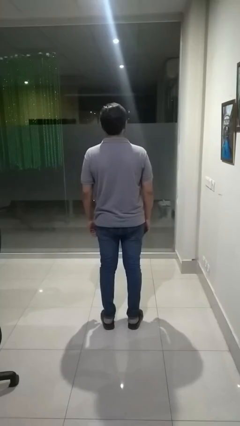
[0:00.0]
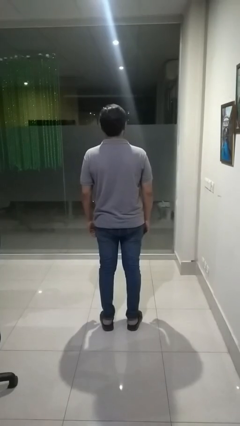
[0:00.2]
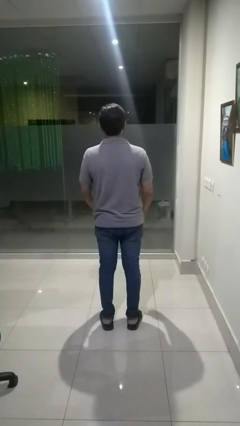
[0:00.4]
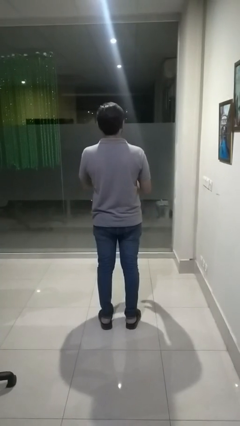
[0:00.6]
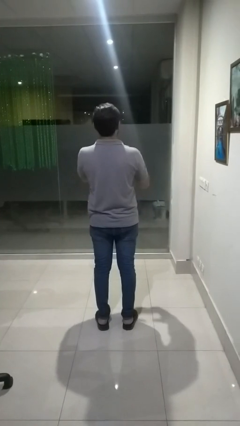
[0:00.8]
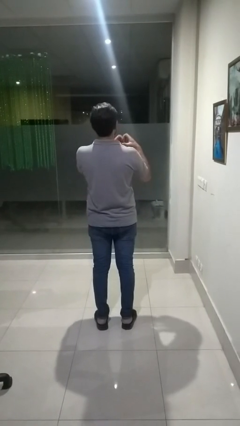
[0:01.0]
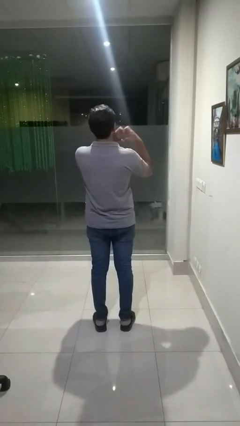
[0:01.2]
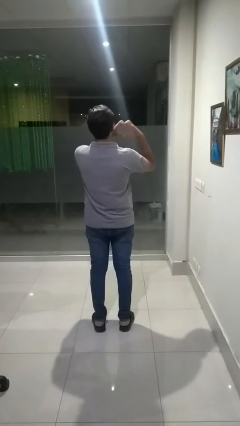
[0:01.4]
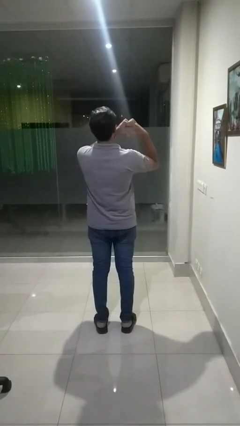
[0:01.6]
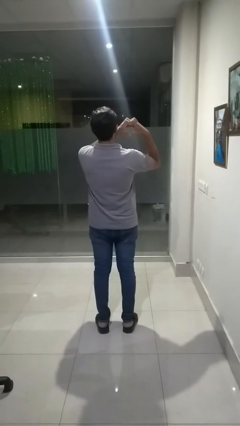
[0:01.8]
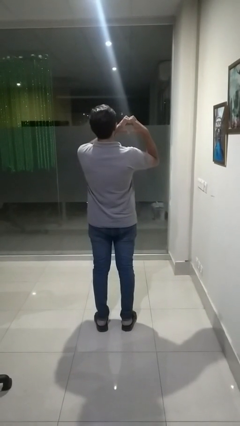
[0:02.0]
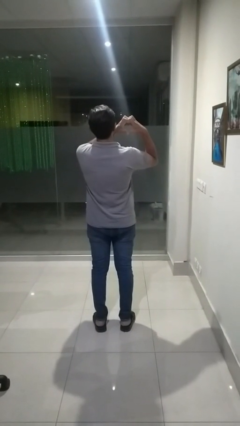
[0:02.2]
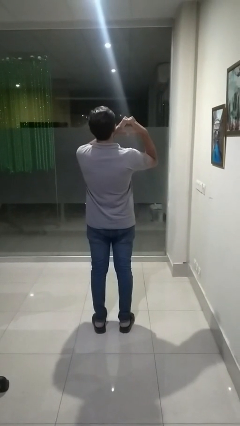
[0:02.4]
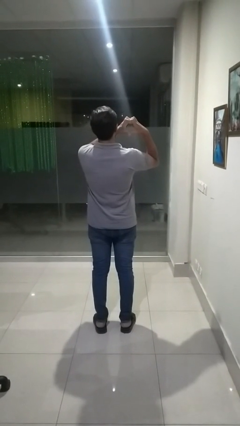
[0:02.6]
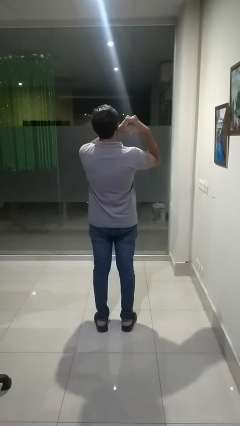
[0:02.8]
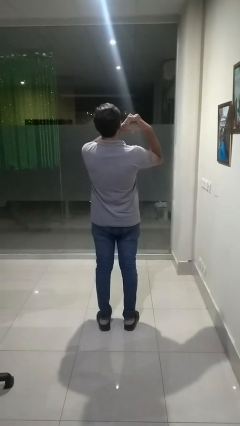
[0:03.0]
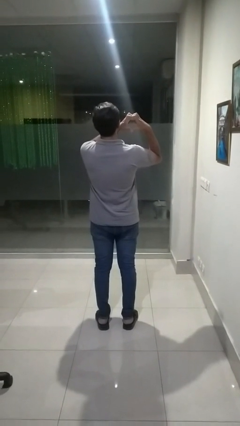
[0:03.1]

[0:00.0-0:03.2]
person gestures heart

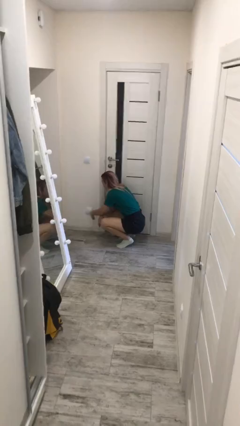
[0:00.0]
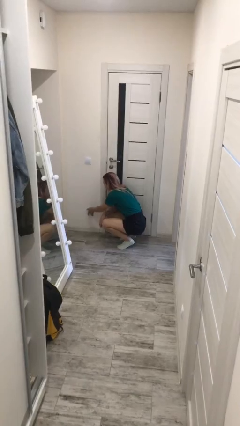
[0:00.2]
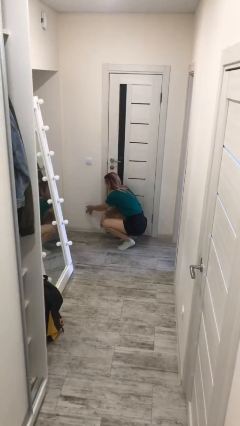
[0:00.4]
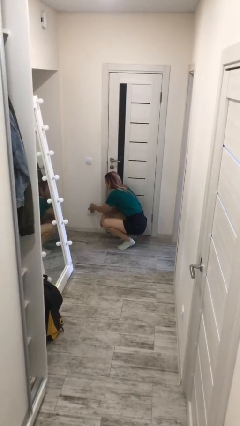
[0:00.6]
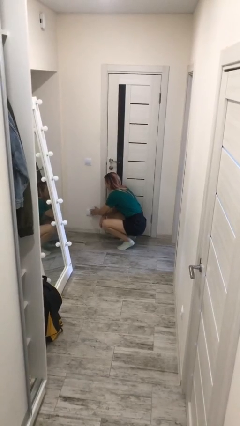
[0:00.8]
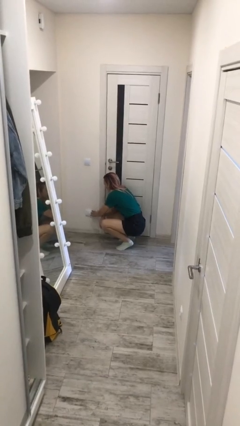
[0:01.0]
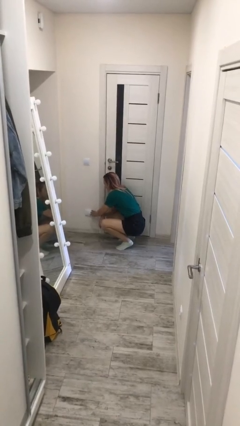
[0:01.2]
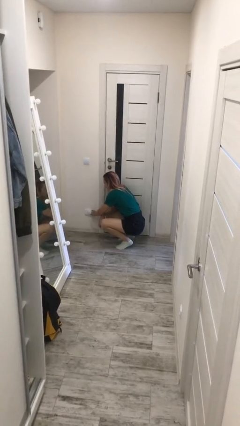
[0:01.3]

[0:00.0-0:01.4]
person adjusts thermostat

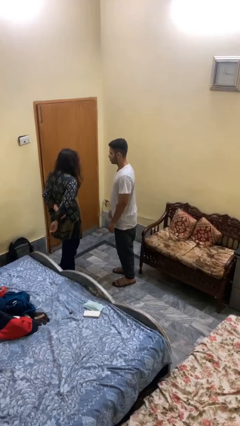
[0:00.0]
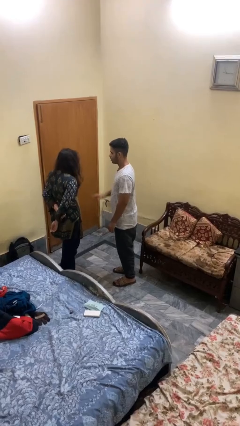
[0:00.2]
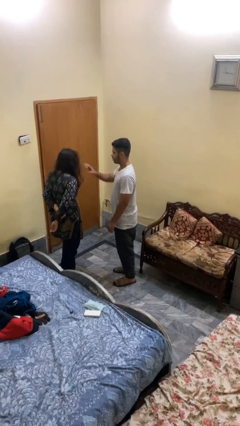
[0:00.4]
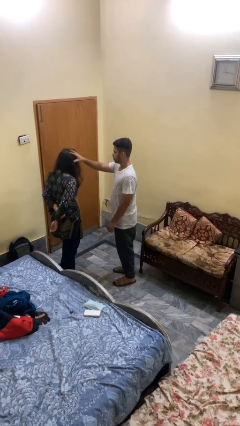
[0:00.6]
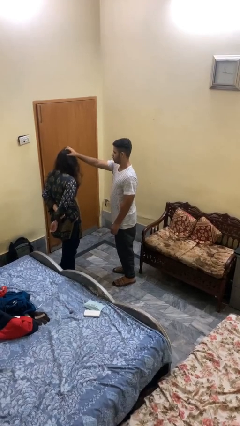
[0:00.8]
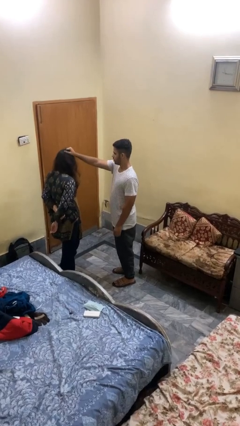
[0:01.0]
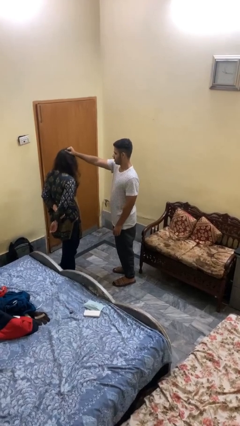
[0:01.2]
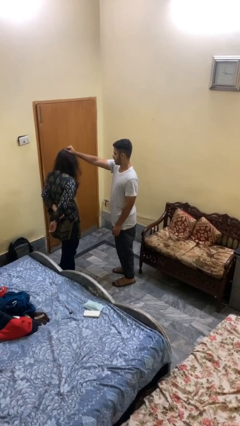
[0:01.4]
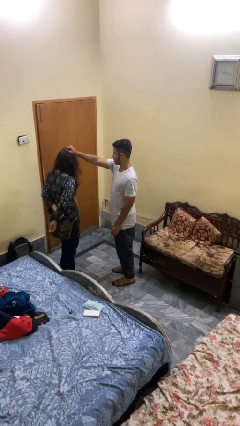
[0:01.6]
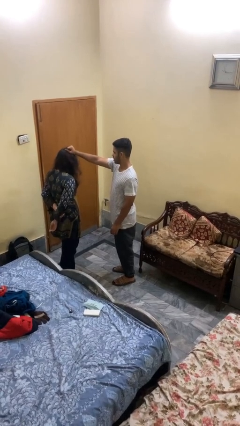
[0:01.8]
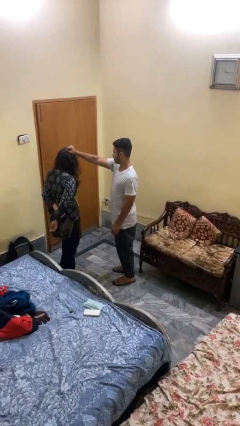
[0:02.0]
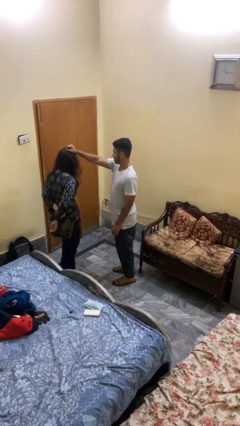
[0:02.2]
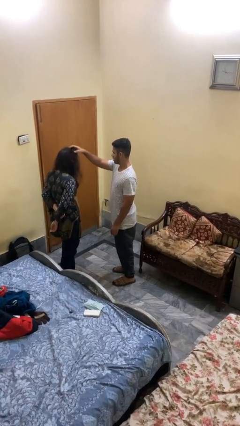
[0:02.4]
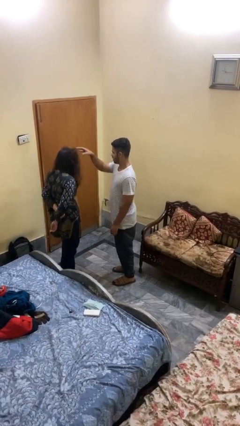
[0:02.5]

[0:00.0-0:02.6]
person grabs person by hair

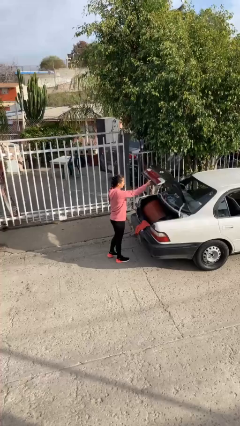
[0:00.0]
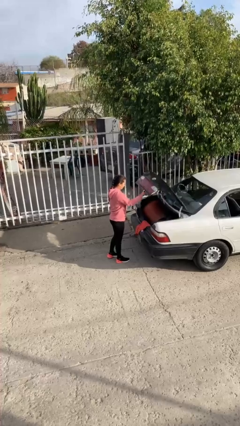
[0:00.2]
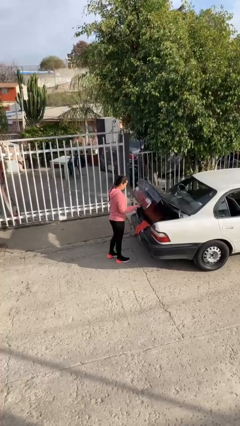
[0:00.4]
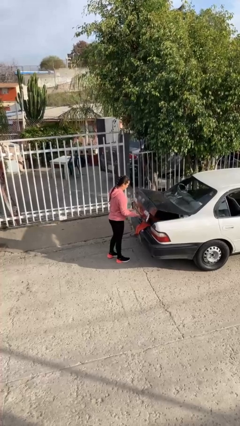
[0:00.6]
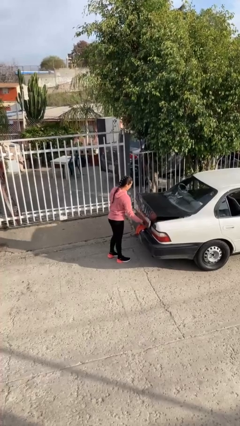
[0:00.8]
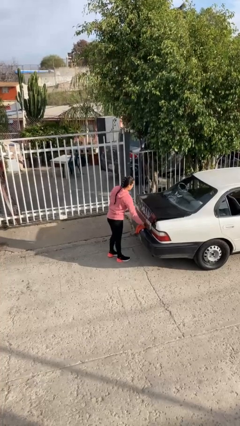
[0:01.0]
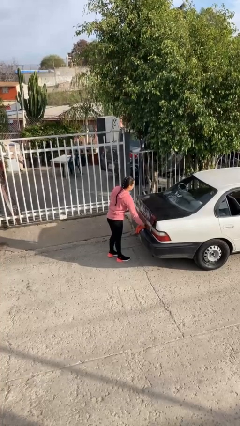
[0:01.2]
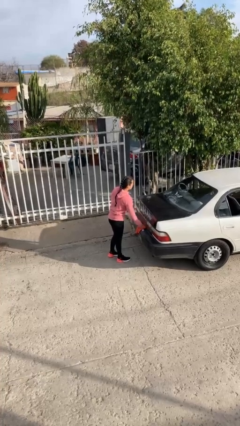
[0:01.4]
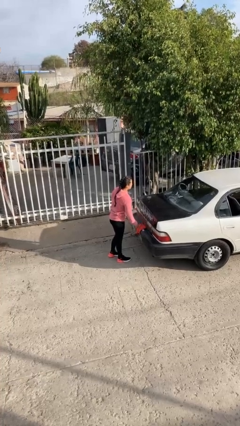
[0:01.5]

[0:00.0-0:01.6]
person closes car trunk

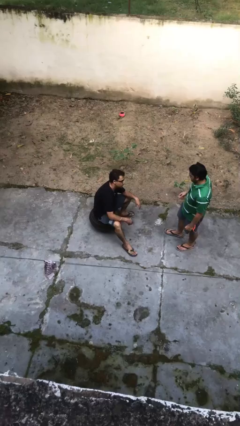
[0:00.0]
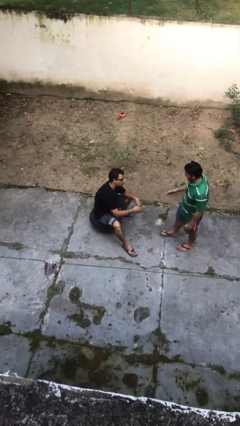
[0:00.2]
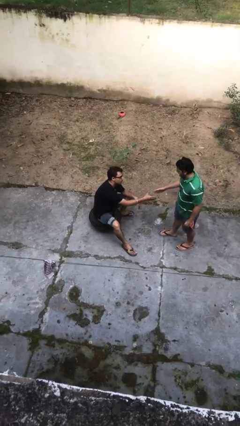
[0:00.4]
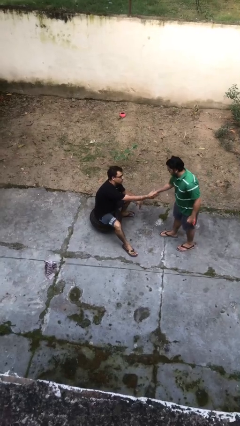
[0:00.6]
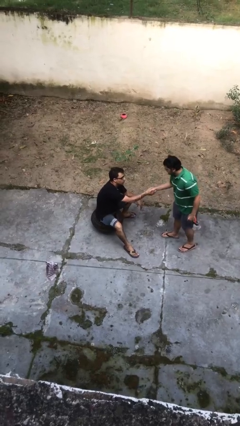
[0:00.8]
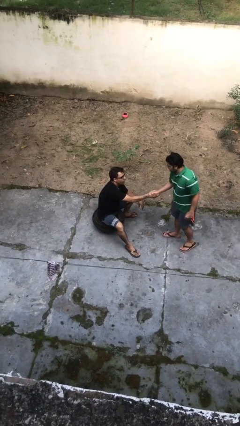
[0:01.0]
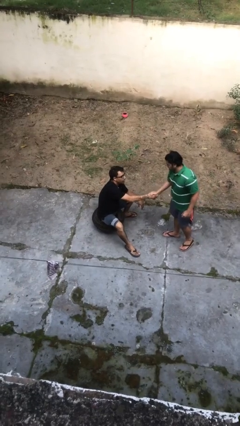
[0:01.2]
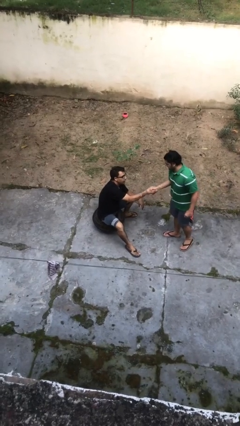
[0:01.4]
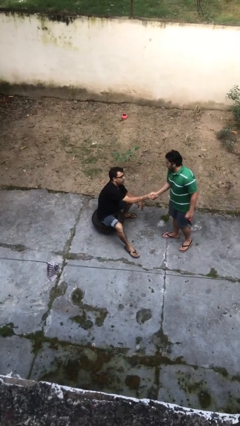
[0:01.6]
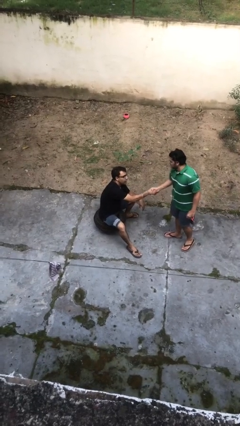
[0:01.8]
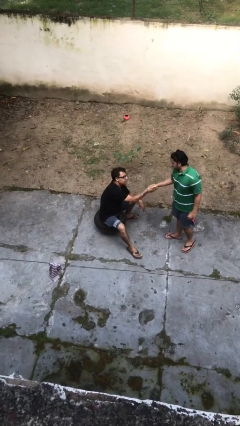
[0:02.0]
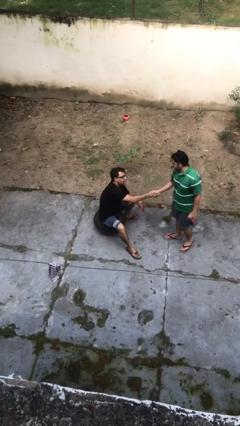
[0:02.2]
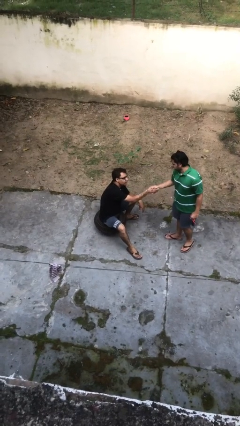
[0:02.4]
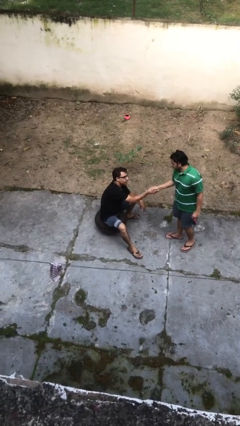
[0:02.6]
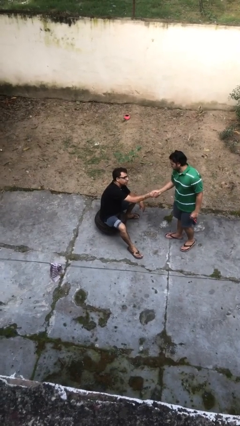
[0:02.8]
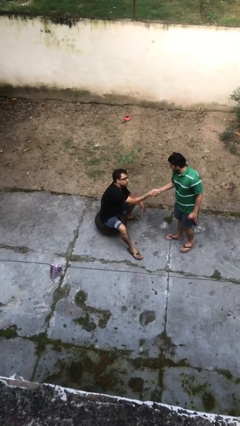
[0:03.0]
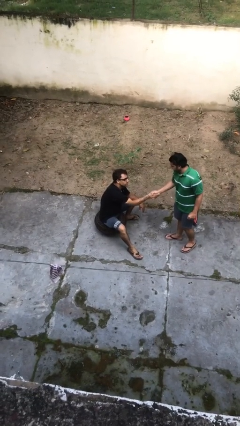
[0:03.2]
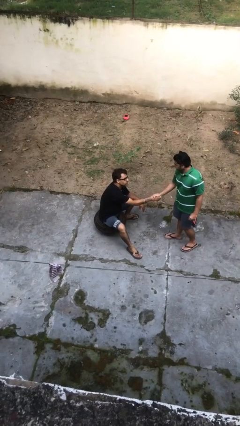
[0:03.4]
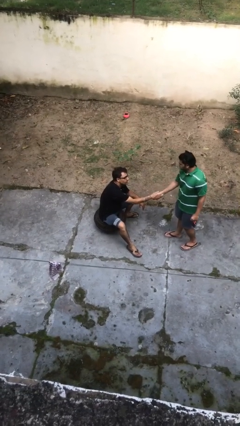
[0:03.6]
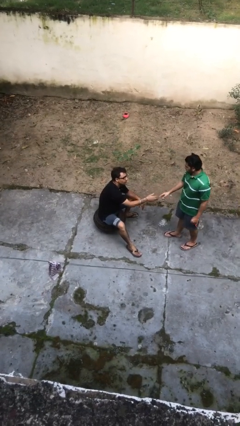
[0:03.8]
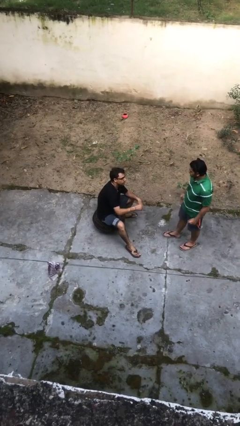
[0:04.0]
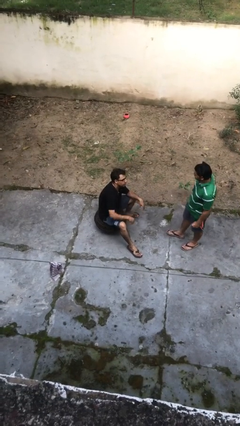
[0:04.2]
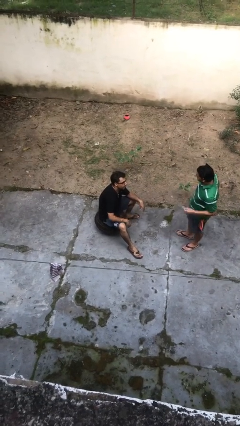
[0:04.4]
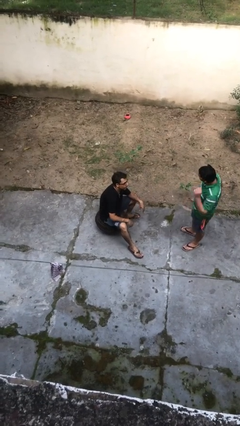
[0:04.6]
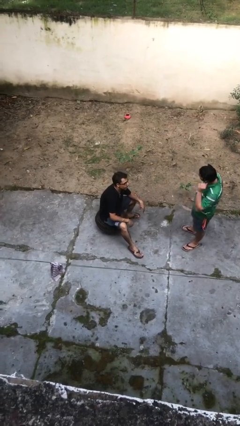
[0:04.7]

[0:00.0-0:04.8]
person shakes hand

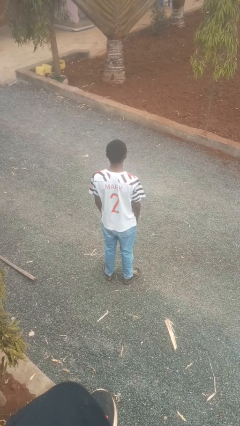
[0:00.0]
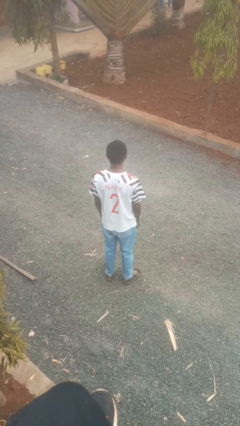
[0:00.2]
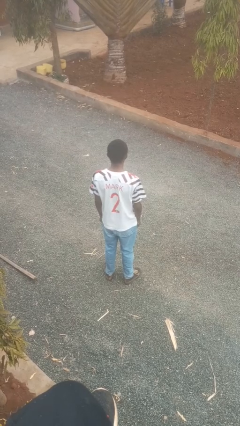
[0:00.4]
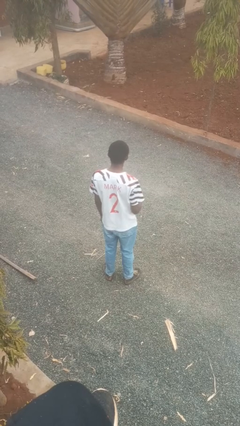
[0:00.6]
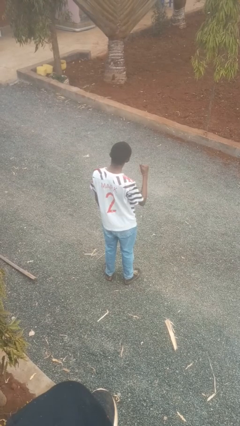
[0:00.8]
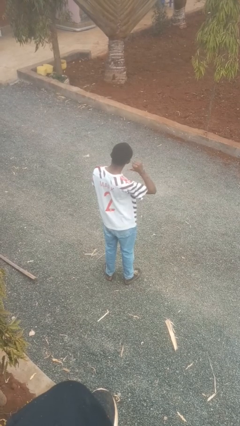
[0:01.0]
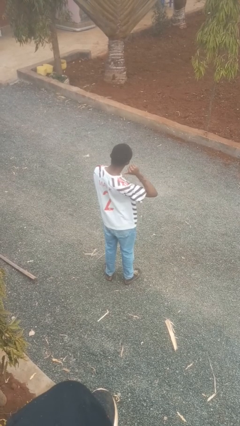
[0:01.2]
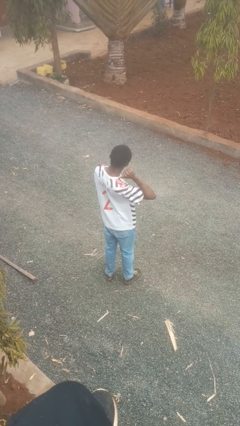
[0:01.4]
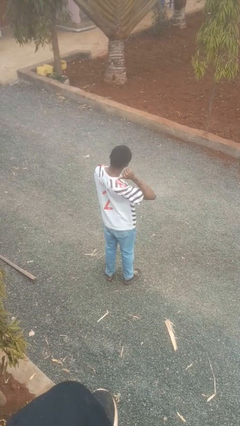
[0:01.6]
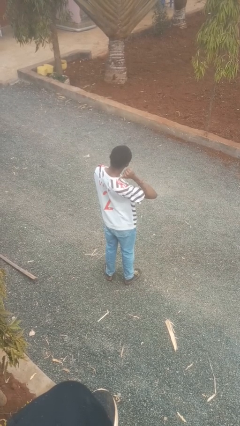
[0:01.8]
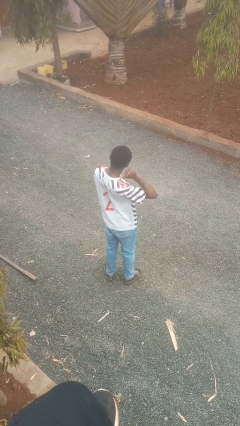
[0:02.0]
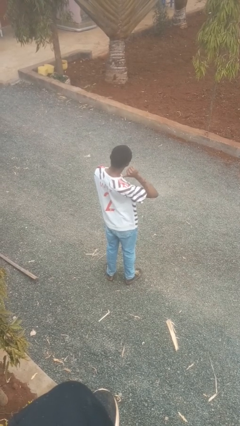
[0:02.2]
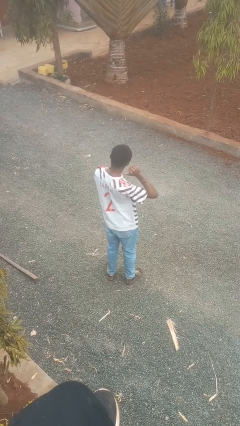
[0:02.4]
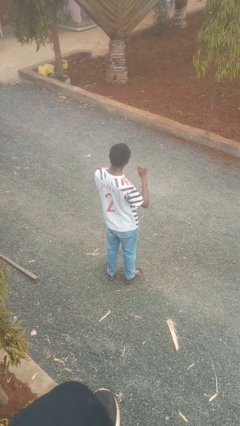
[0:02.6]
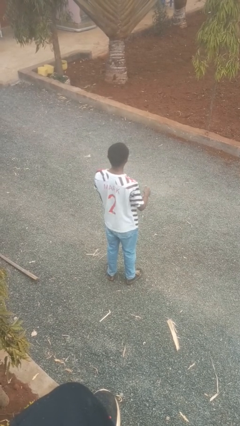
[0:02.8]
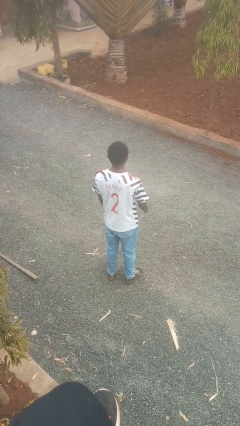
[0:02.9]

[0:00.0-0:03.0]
person gestures behind me

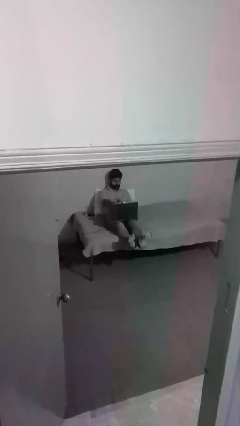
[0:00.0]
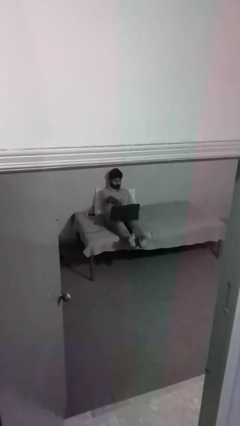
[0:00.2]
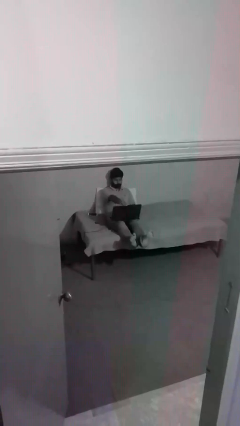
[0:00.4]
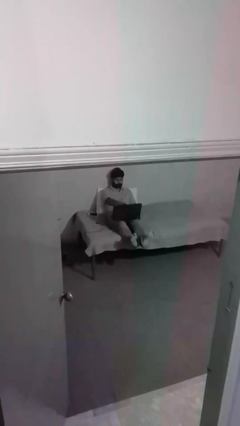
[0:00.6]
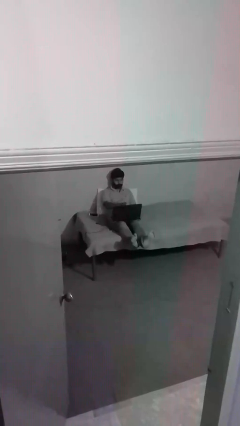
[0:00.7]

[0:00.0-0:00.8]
person interacts with laptop
